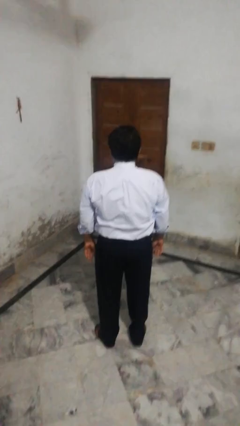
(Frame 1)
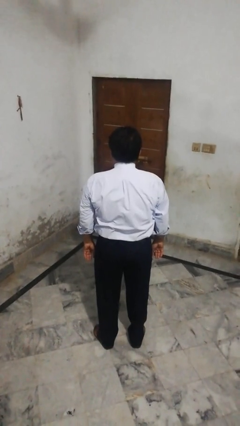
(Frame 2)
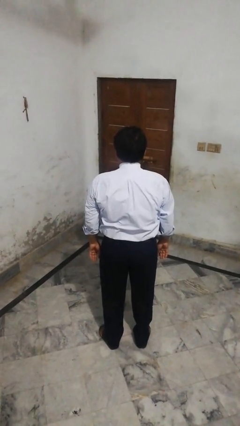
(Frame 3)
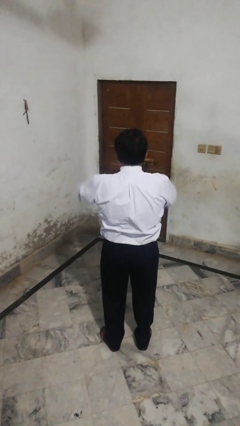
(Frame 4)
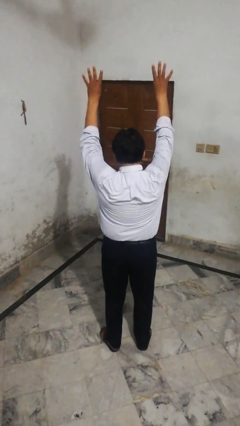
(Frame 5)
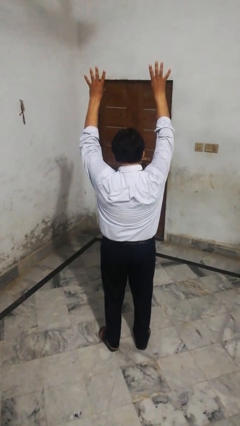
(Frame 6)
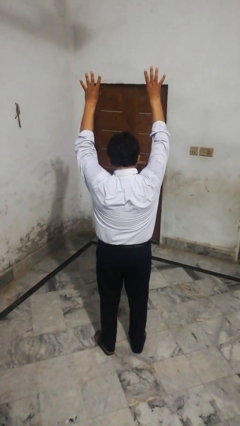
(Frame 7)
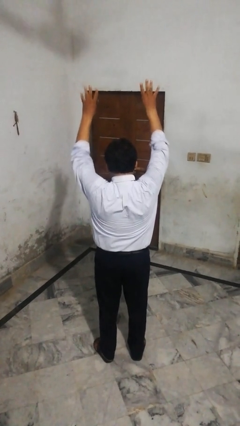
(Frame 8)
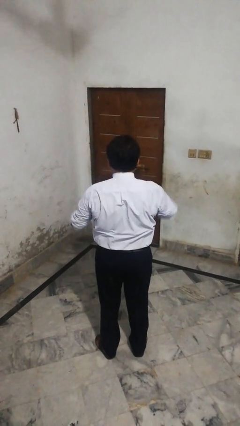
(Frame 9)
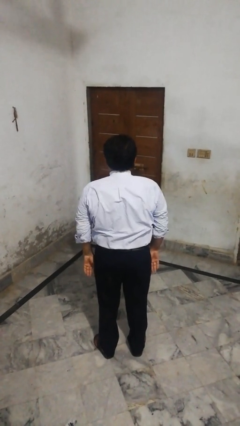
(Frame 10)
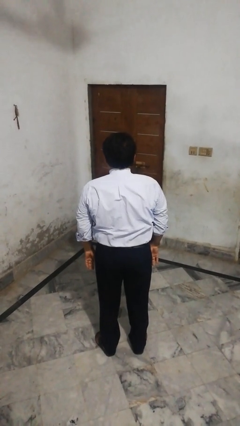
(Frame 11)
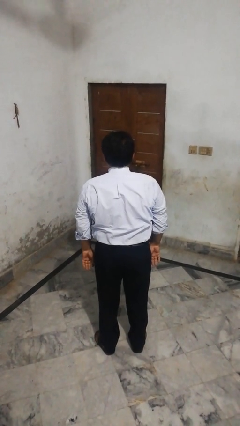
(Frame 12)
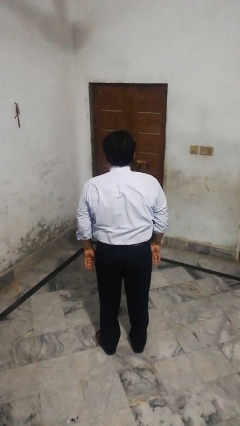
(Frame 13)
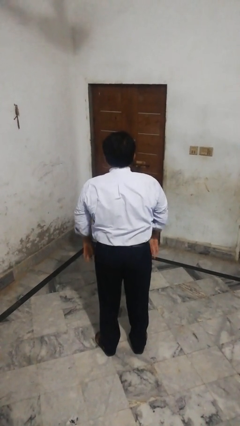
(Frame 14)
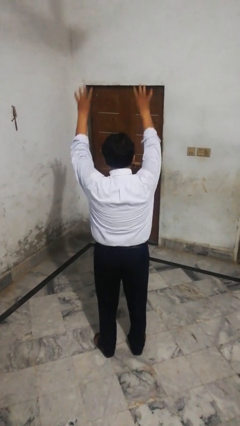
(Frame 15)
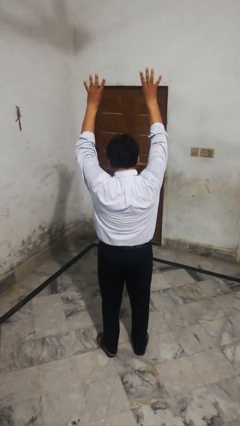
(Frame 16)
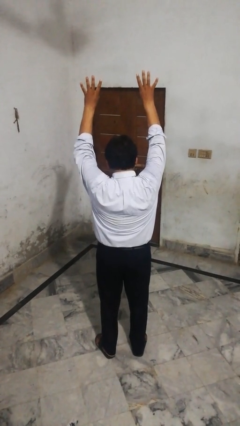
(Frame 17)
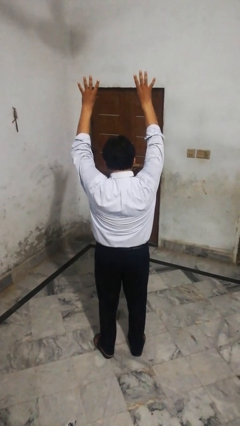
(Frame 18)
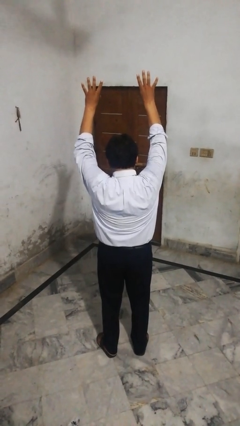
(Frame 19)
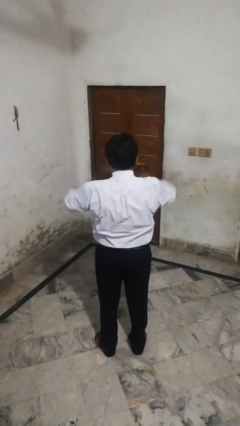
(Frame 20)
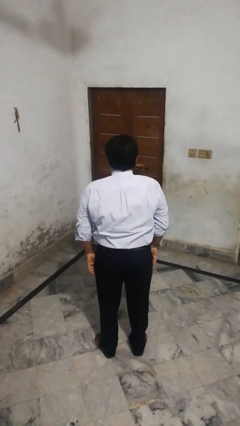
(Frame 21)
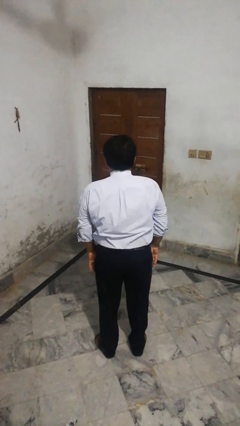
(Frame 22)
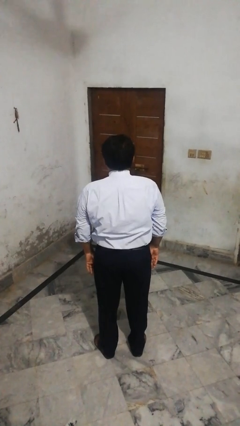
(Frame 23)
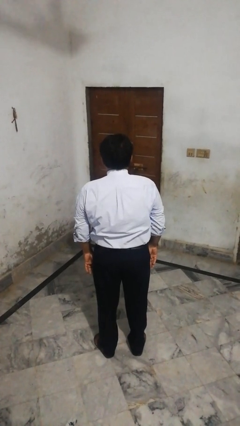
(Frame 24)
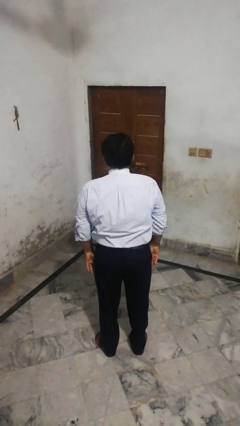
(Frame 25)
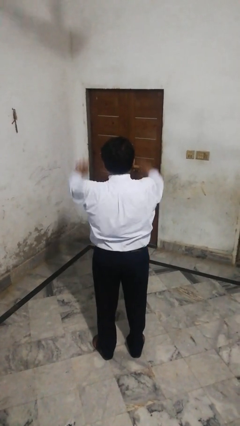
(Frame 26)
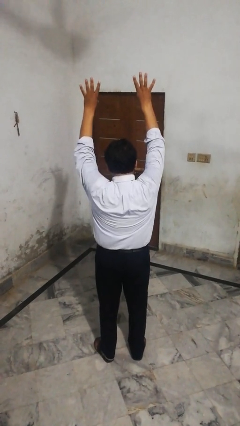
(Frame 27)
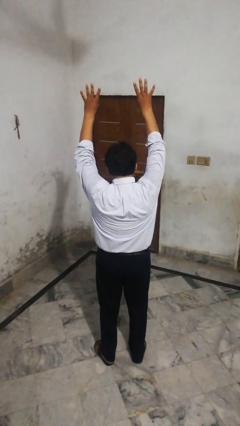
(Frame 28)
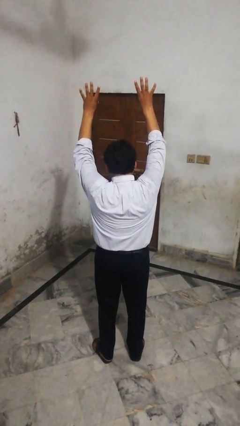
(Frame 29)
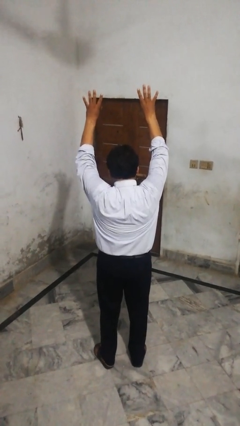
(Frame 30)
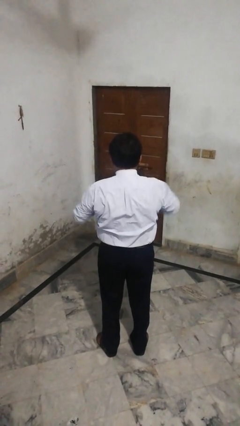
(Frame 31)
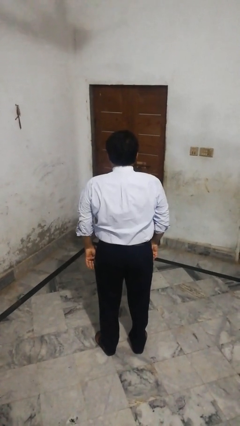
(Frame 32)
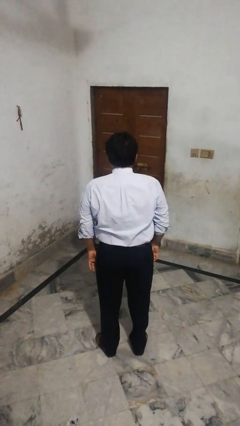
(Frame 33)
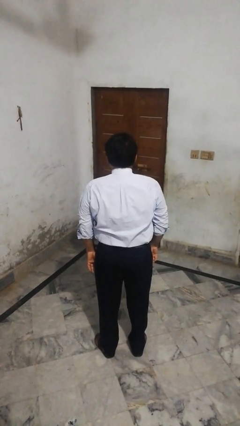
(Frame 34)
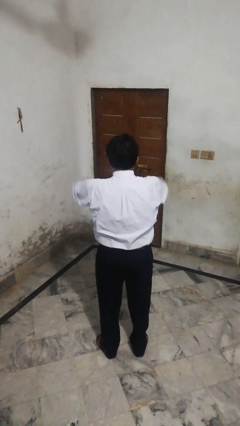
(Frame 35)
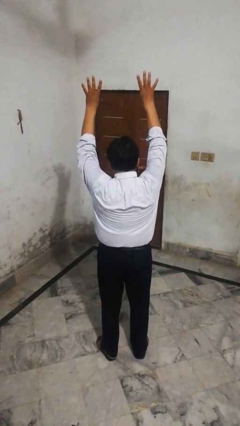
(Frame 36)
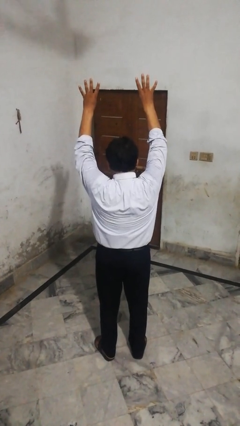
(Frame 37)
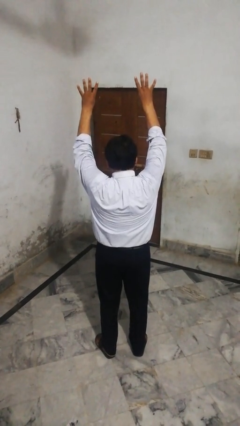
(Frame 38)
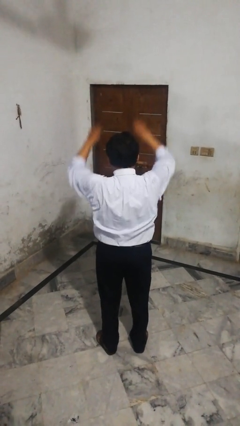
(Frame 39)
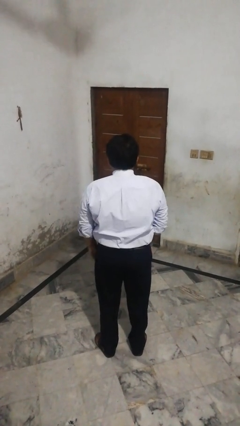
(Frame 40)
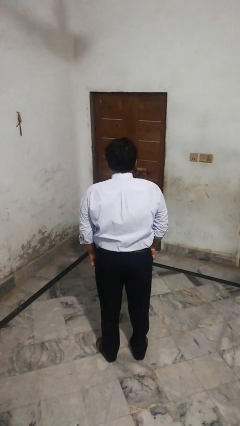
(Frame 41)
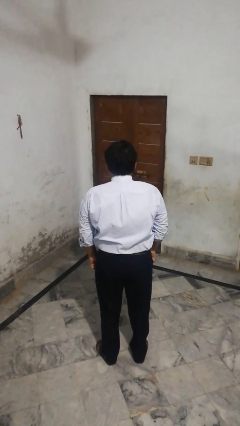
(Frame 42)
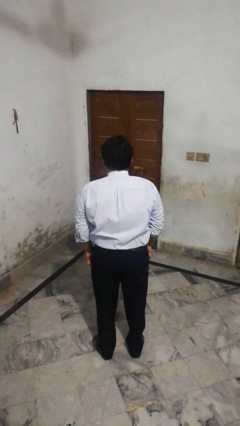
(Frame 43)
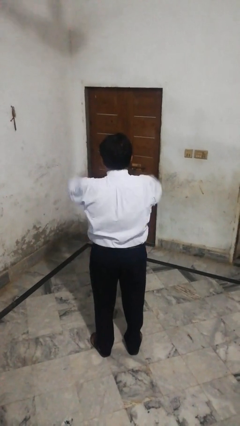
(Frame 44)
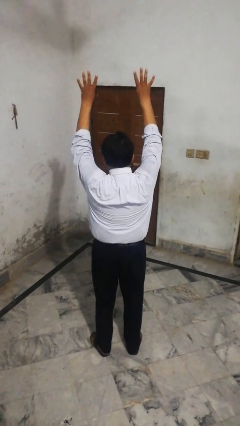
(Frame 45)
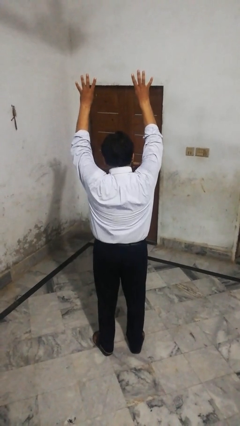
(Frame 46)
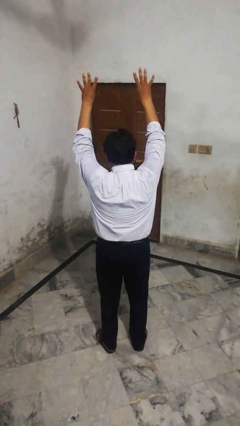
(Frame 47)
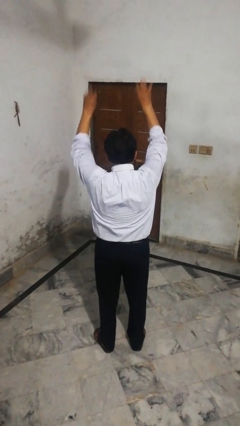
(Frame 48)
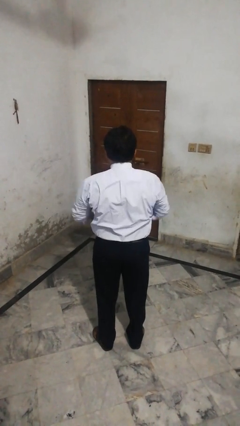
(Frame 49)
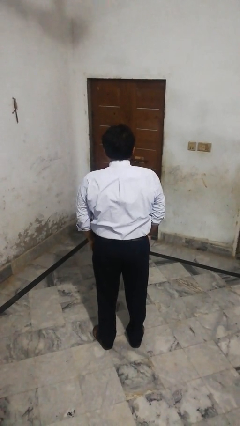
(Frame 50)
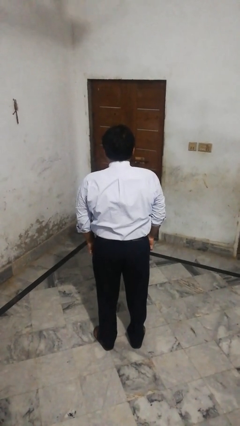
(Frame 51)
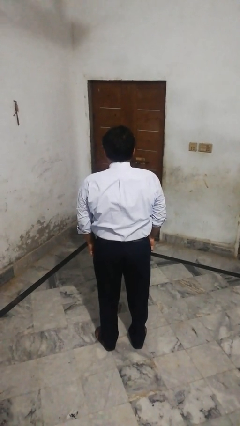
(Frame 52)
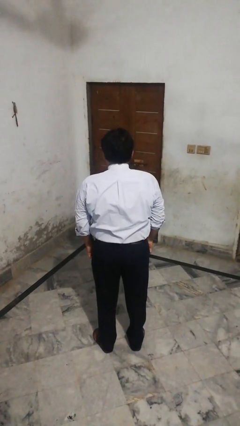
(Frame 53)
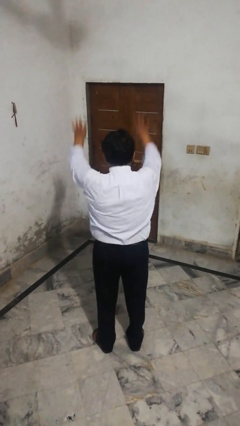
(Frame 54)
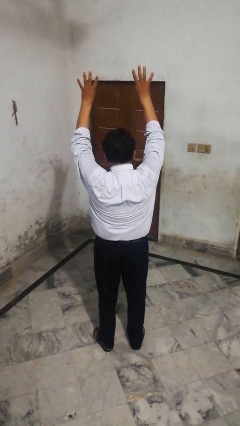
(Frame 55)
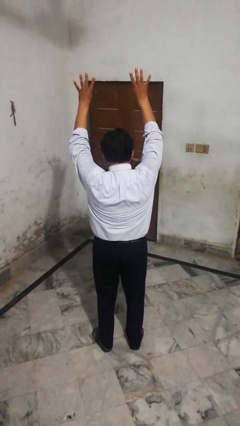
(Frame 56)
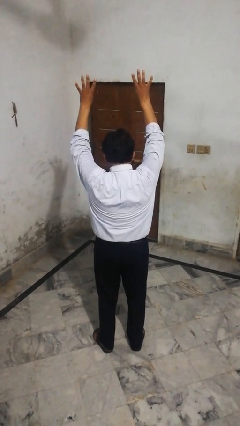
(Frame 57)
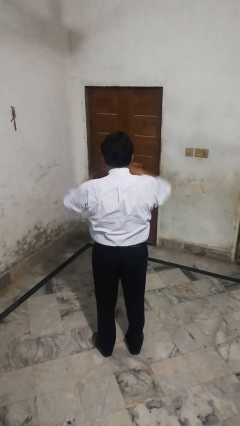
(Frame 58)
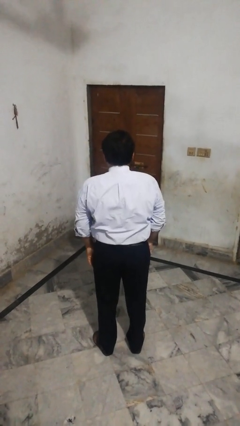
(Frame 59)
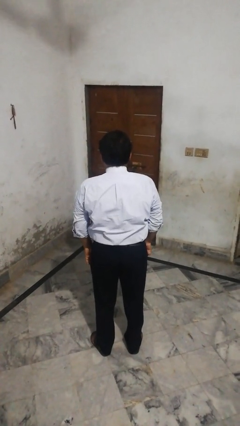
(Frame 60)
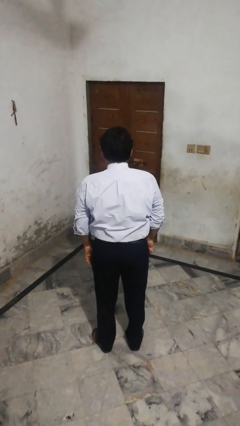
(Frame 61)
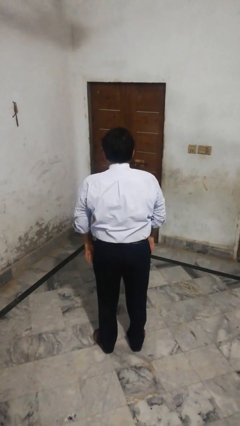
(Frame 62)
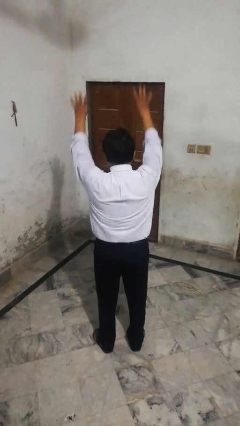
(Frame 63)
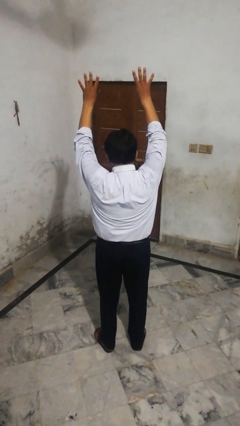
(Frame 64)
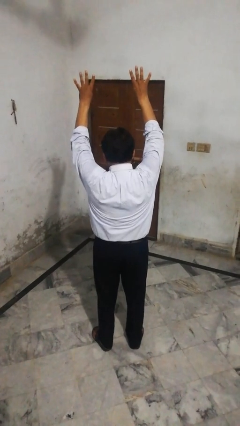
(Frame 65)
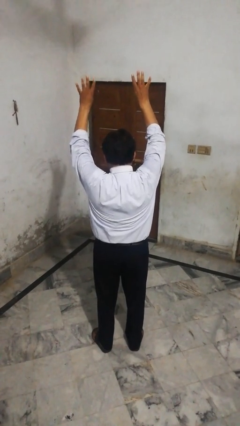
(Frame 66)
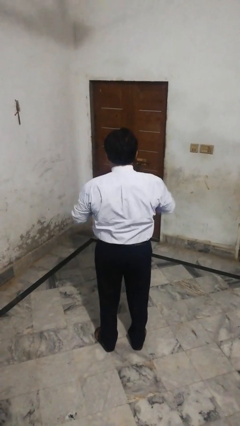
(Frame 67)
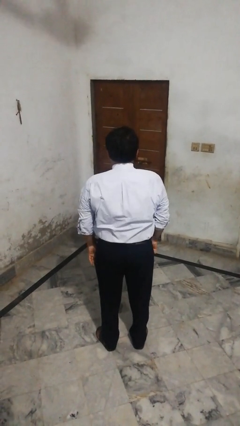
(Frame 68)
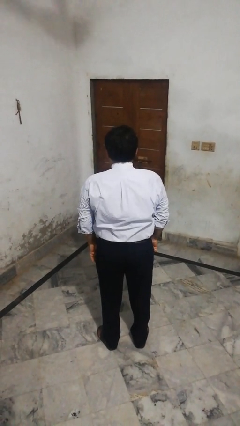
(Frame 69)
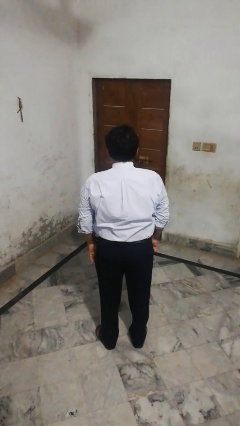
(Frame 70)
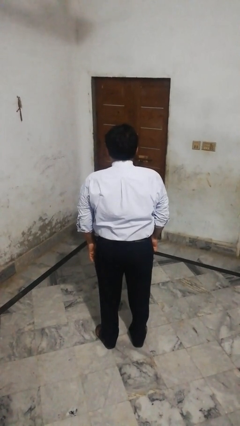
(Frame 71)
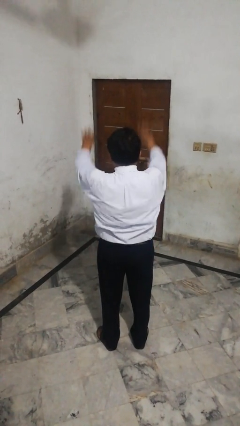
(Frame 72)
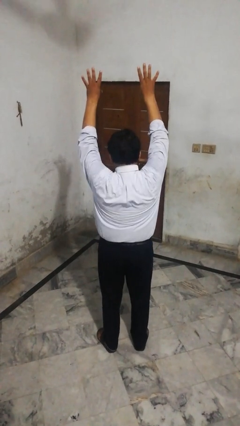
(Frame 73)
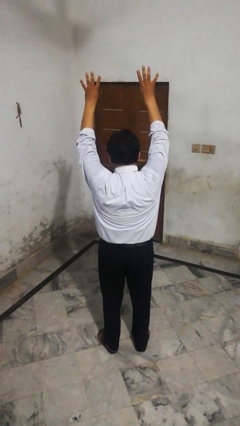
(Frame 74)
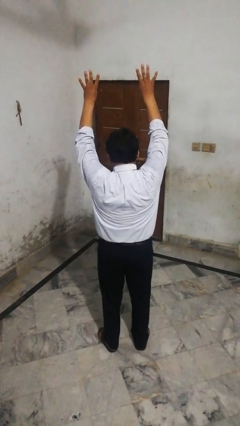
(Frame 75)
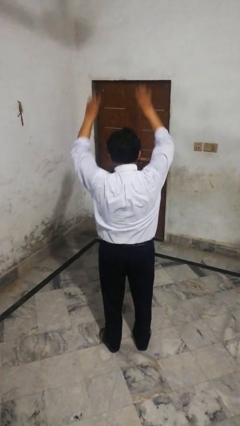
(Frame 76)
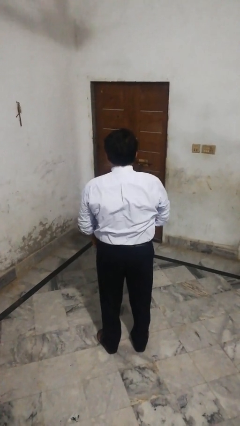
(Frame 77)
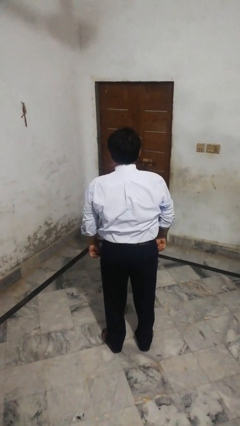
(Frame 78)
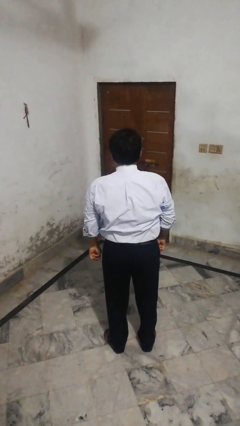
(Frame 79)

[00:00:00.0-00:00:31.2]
person gestures number four

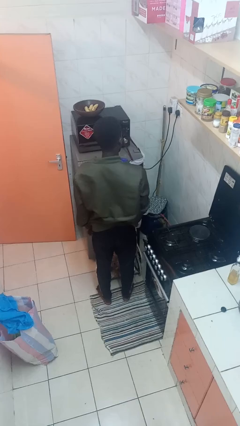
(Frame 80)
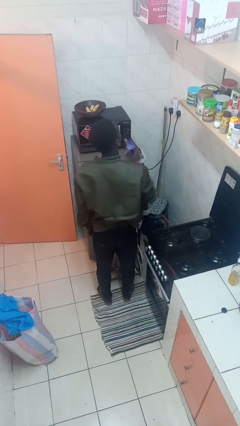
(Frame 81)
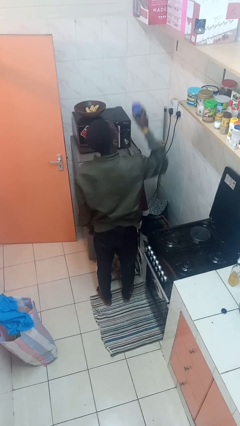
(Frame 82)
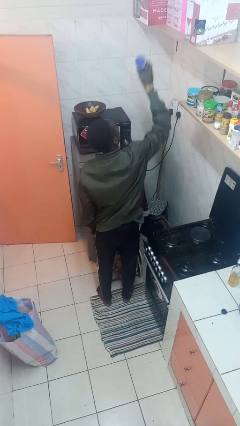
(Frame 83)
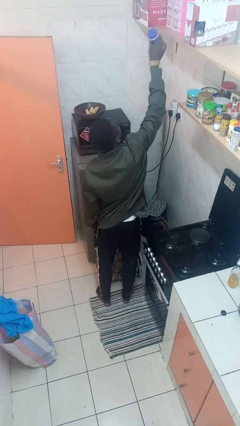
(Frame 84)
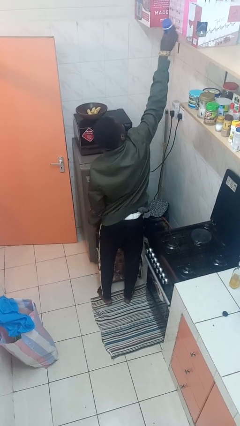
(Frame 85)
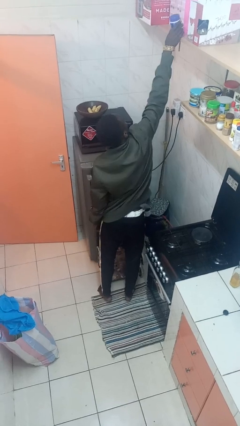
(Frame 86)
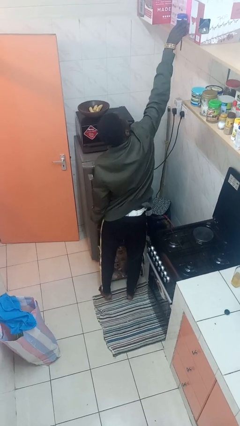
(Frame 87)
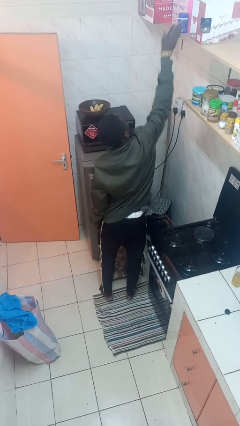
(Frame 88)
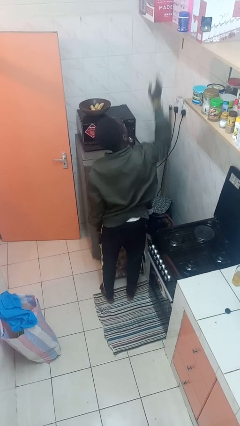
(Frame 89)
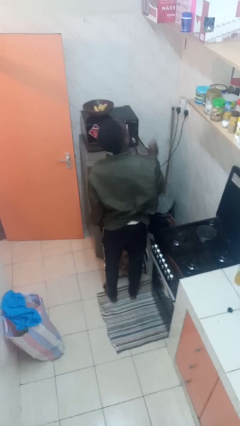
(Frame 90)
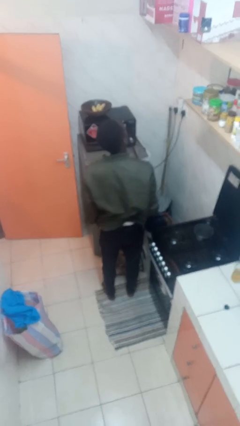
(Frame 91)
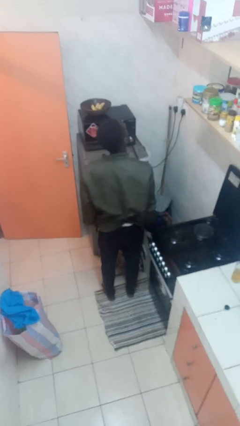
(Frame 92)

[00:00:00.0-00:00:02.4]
person puts down object on shelf

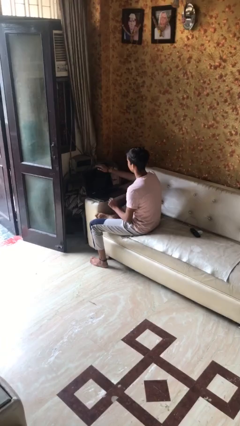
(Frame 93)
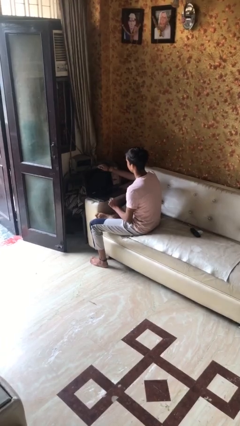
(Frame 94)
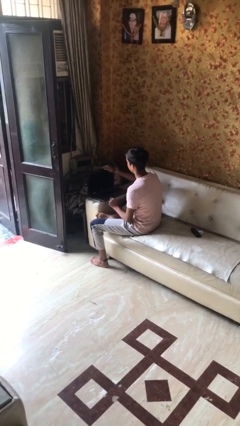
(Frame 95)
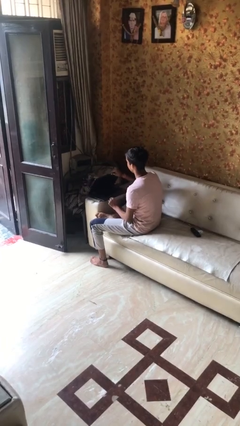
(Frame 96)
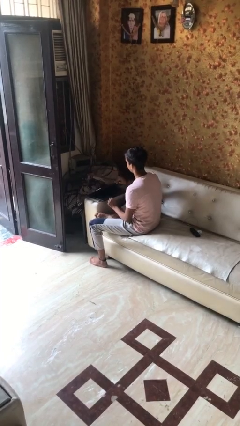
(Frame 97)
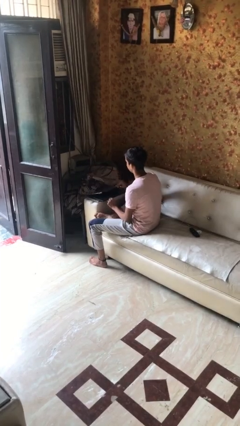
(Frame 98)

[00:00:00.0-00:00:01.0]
person closes laptop
